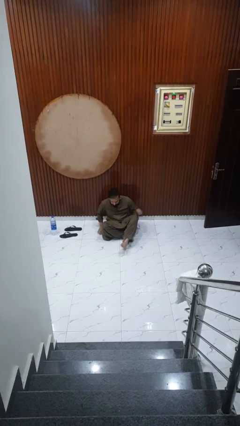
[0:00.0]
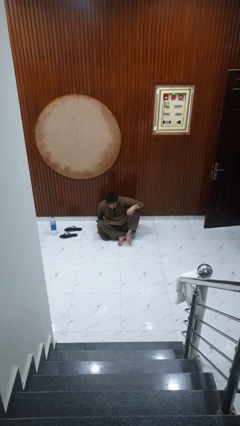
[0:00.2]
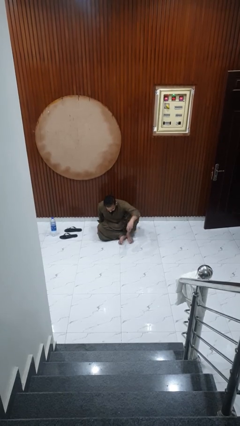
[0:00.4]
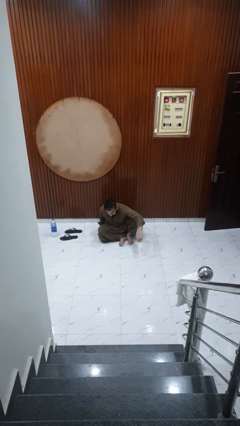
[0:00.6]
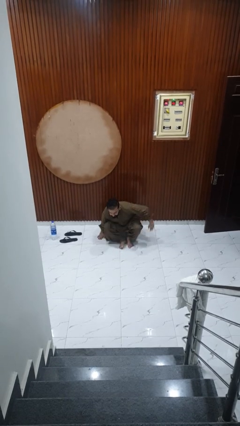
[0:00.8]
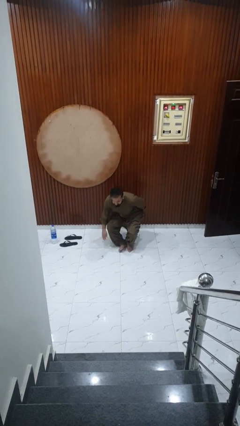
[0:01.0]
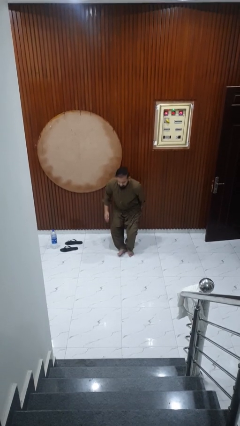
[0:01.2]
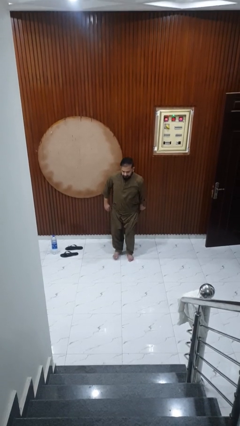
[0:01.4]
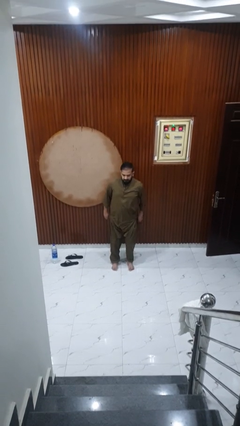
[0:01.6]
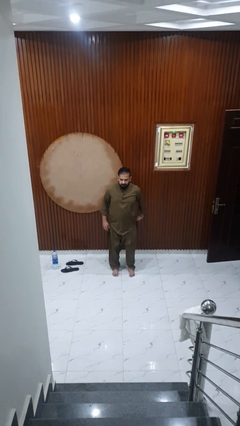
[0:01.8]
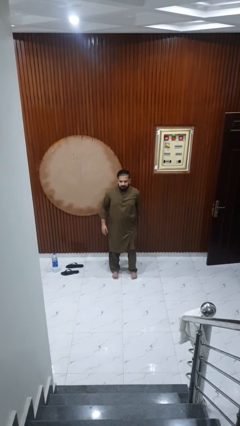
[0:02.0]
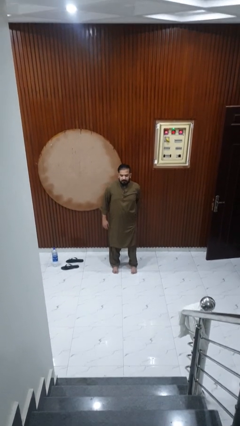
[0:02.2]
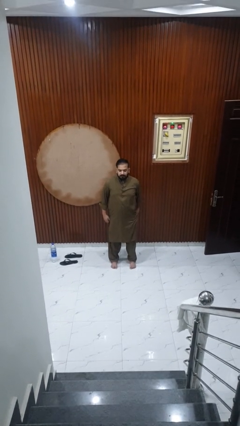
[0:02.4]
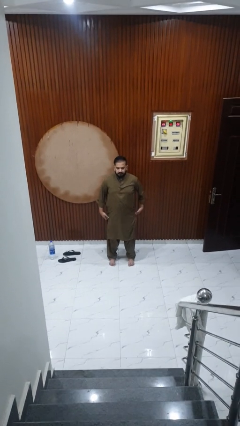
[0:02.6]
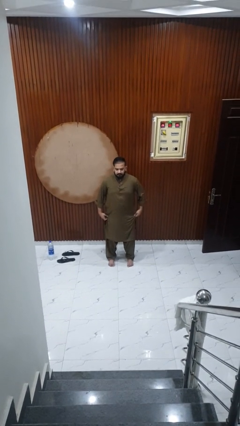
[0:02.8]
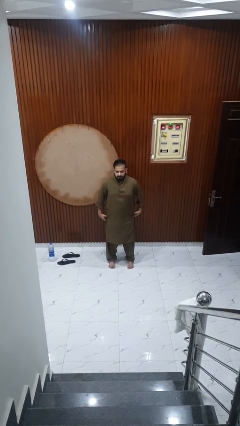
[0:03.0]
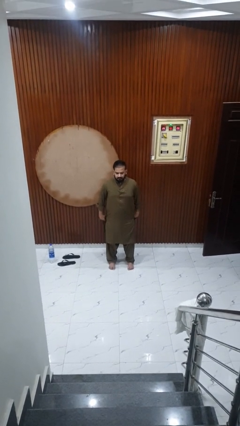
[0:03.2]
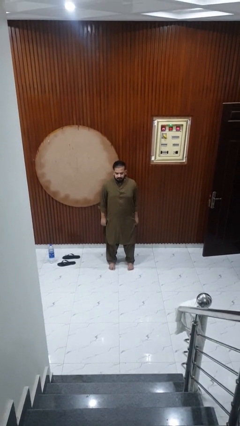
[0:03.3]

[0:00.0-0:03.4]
person stands up from floor

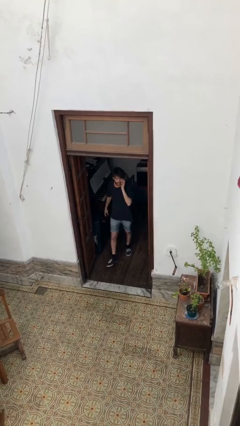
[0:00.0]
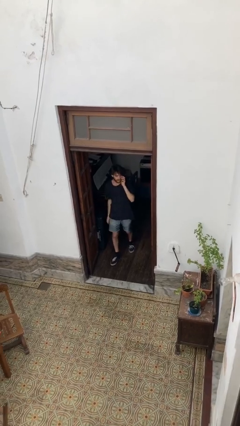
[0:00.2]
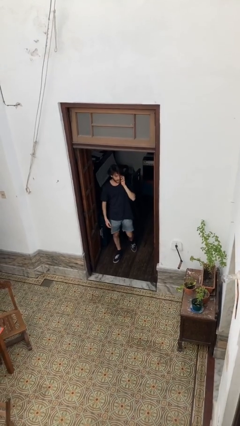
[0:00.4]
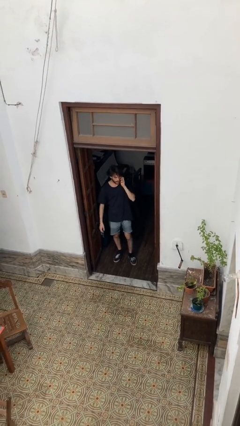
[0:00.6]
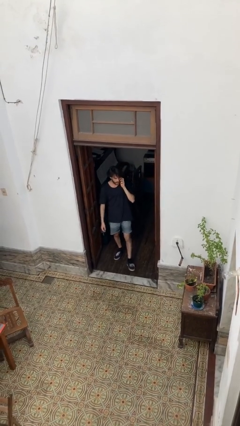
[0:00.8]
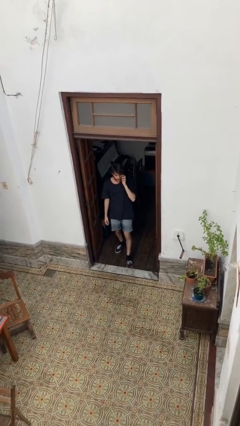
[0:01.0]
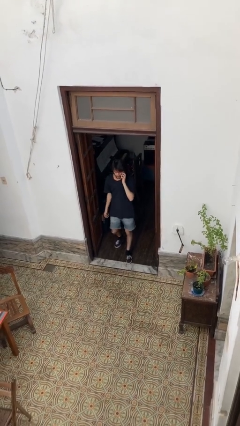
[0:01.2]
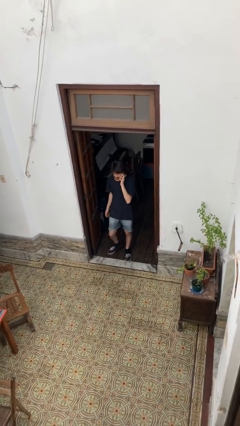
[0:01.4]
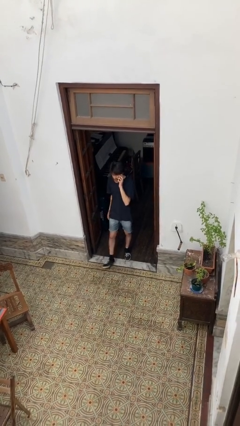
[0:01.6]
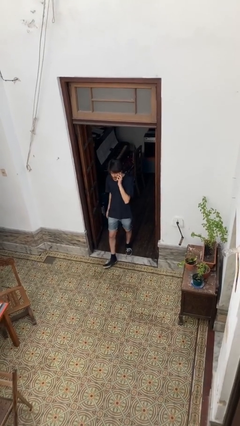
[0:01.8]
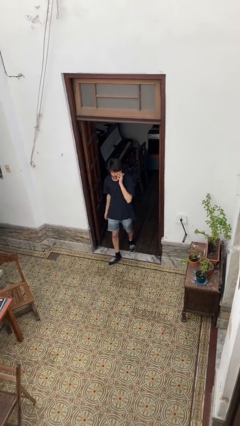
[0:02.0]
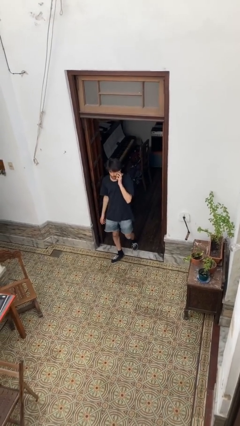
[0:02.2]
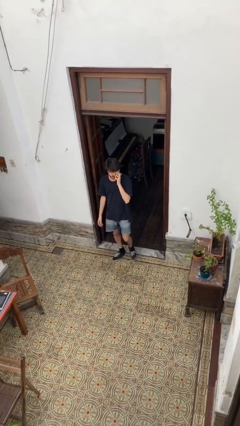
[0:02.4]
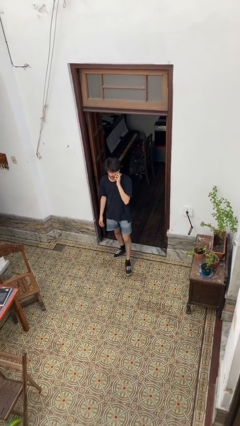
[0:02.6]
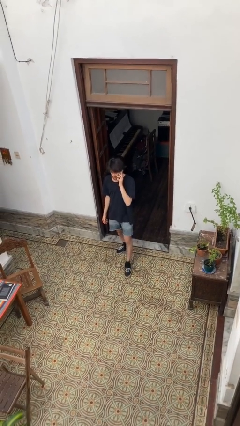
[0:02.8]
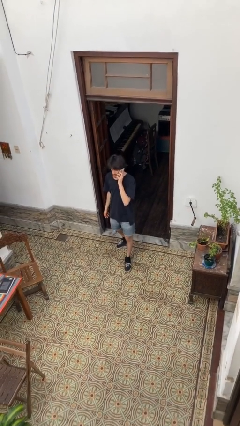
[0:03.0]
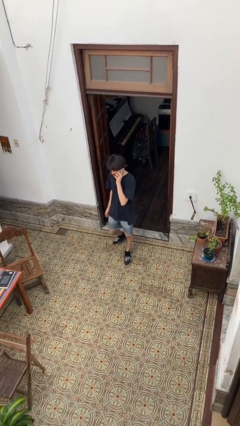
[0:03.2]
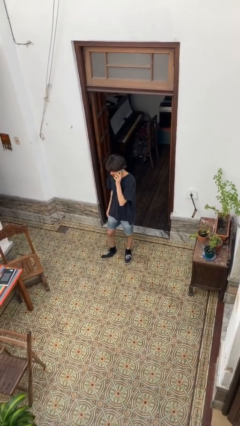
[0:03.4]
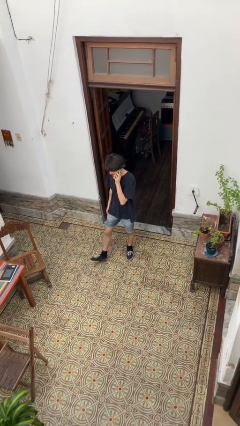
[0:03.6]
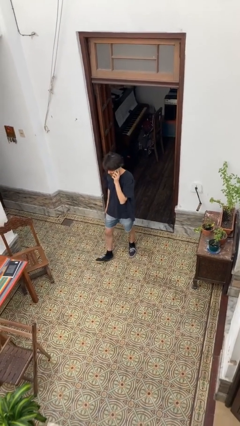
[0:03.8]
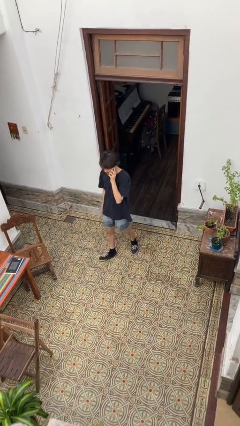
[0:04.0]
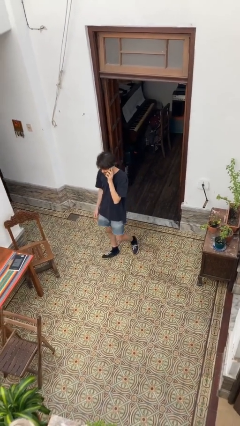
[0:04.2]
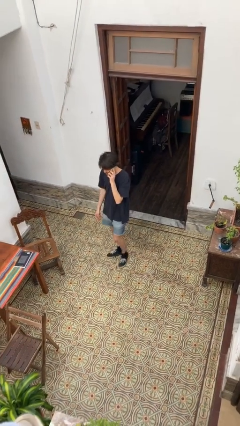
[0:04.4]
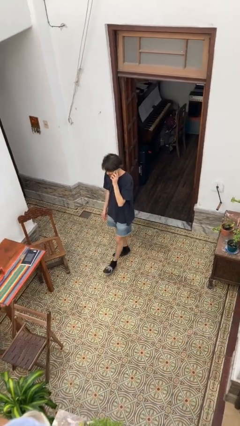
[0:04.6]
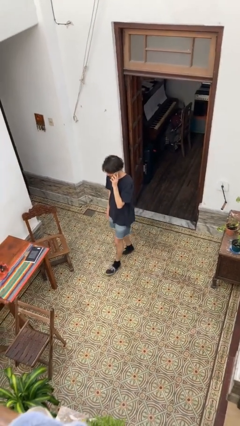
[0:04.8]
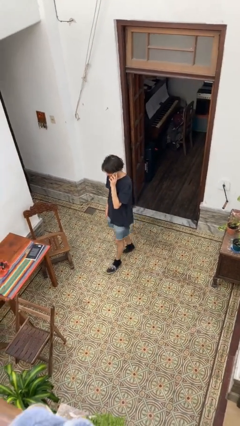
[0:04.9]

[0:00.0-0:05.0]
person enters scene through structure

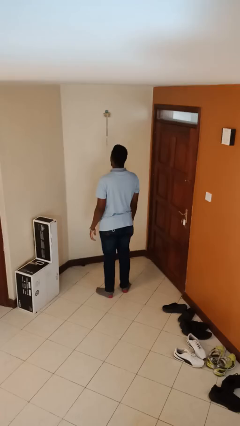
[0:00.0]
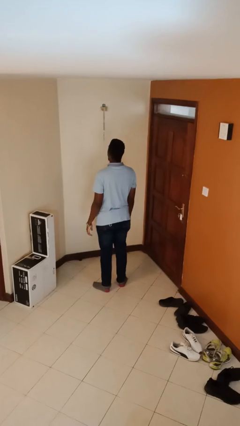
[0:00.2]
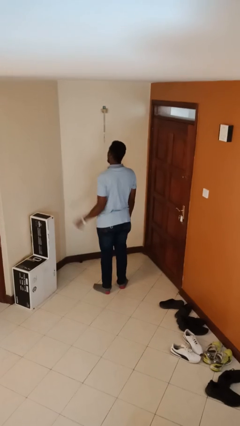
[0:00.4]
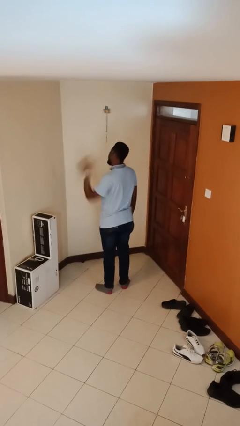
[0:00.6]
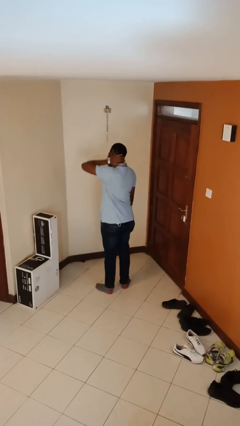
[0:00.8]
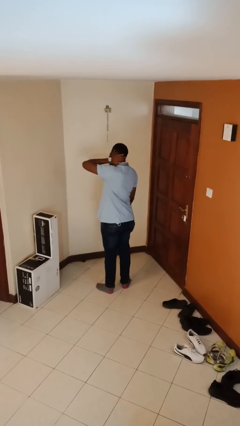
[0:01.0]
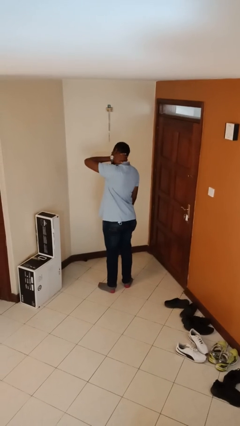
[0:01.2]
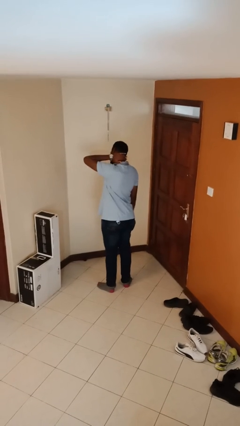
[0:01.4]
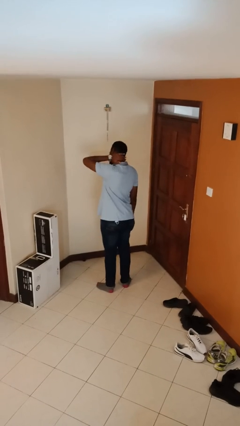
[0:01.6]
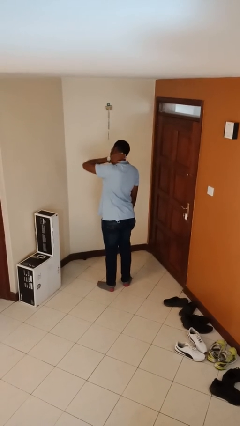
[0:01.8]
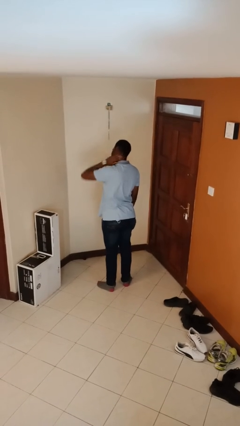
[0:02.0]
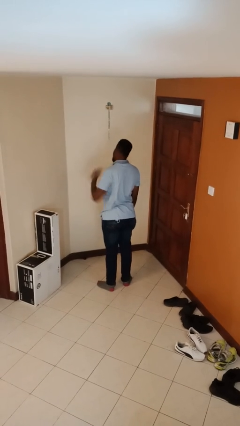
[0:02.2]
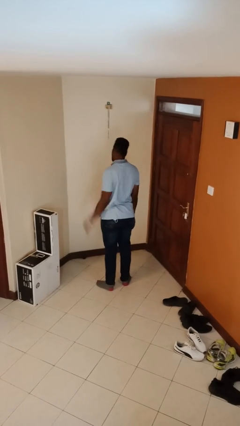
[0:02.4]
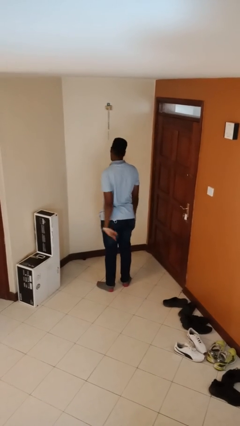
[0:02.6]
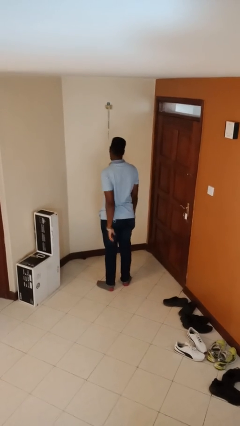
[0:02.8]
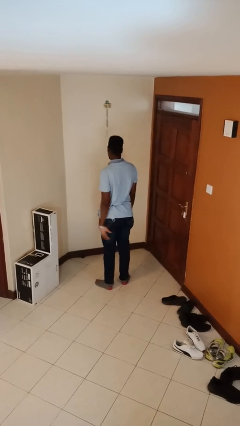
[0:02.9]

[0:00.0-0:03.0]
person swats bug

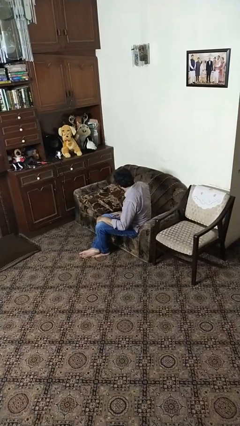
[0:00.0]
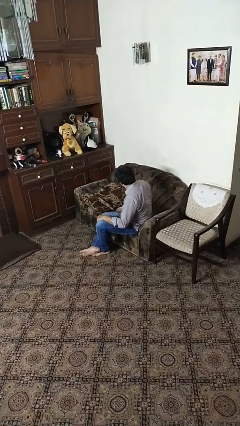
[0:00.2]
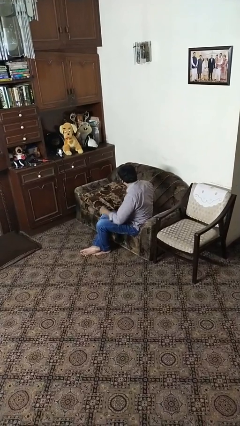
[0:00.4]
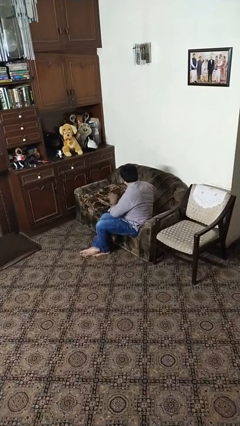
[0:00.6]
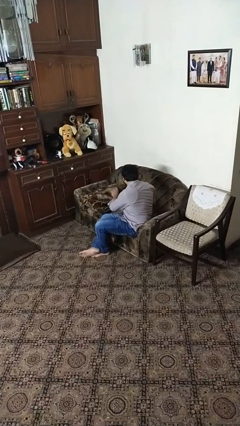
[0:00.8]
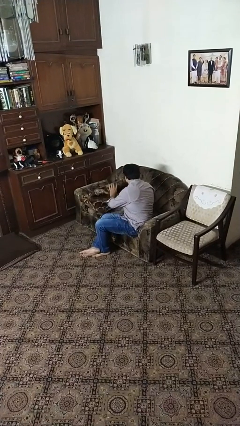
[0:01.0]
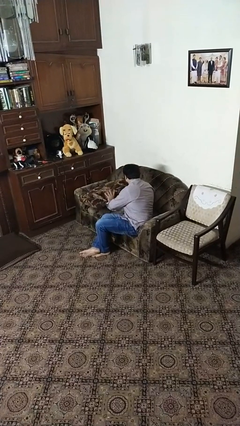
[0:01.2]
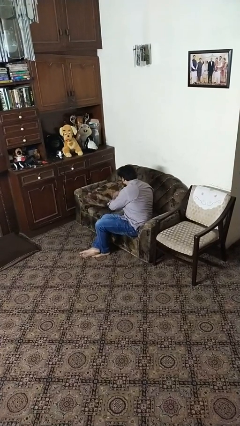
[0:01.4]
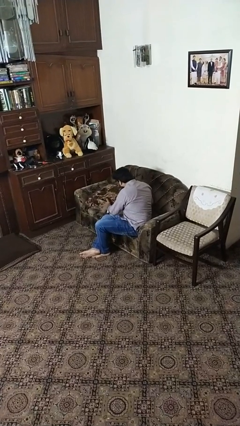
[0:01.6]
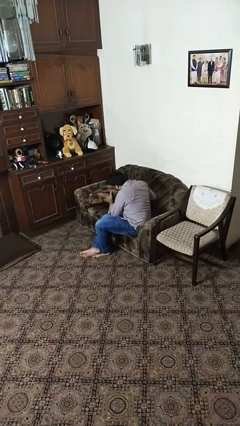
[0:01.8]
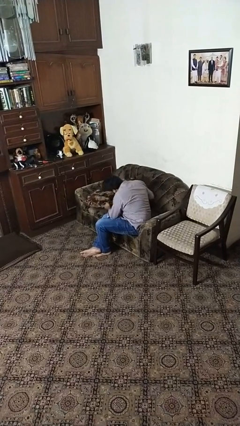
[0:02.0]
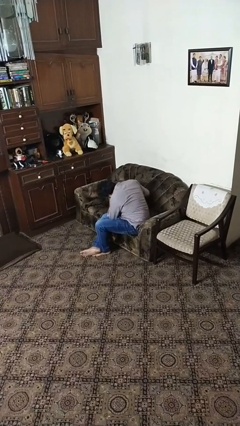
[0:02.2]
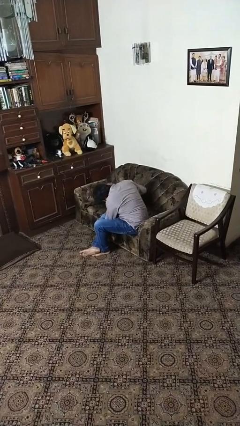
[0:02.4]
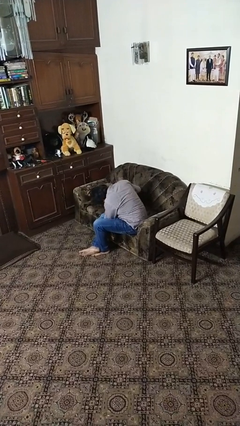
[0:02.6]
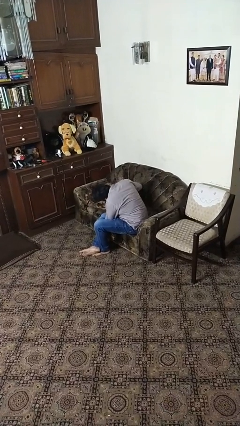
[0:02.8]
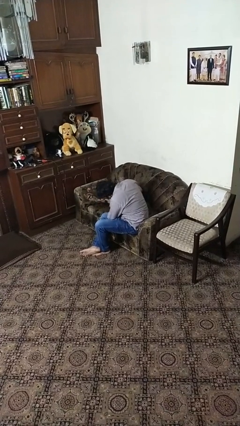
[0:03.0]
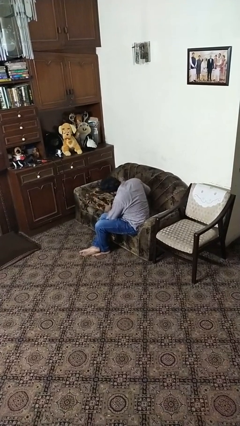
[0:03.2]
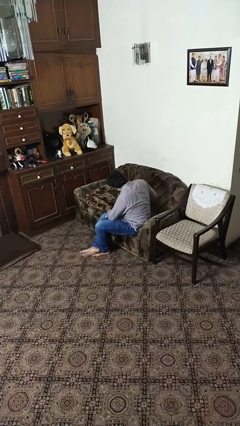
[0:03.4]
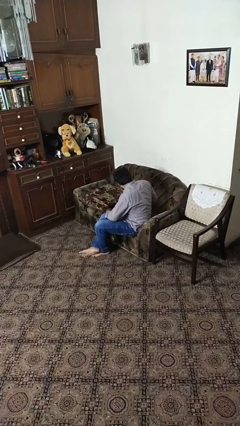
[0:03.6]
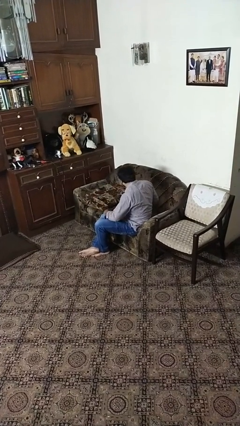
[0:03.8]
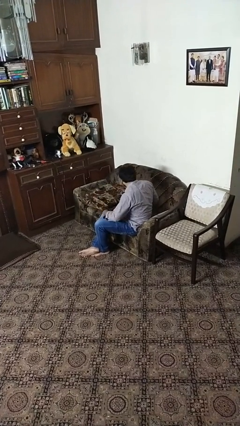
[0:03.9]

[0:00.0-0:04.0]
person searches in couch

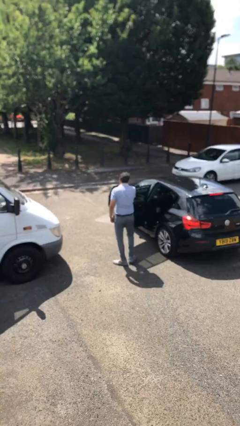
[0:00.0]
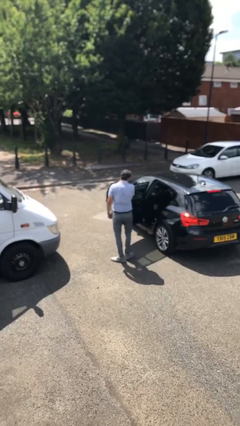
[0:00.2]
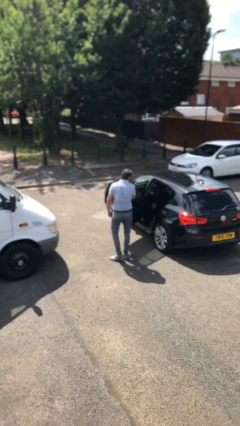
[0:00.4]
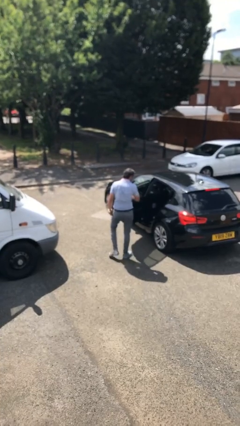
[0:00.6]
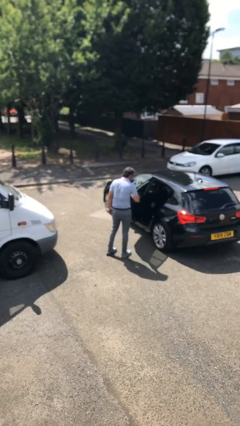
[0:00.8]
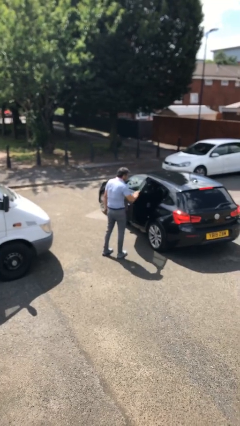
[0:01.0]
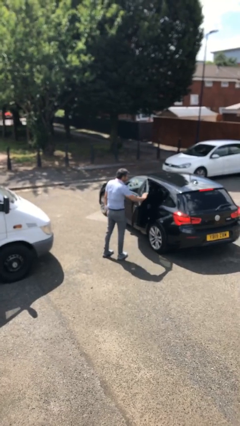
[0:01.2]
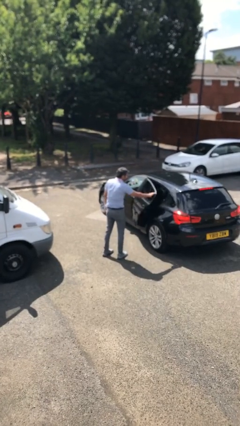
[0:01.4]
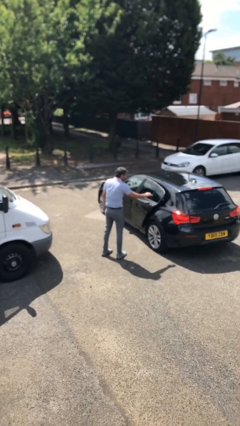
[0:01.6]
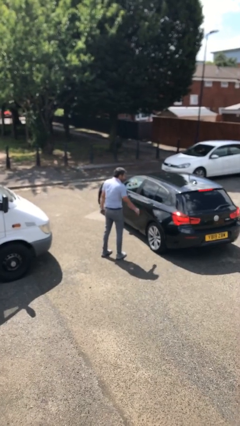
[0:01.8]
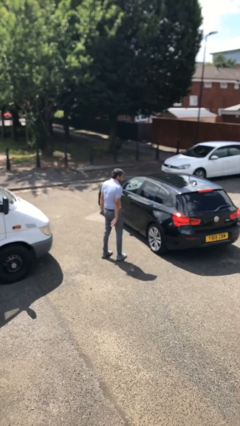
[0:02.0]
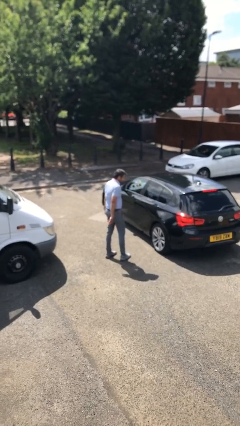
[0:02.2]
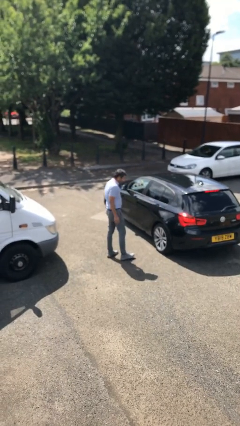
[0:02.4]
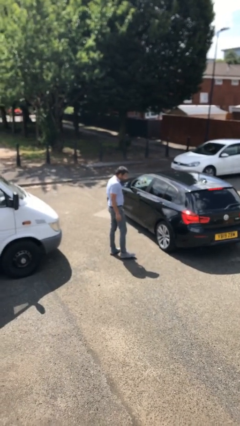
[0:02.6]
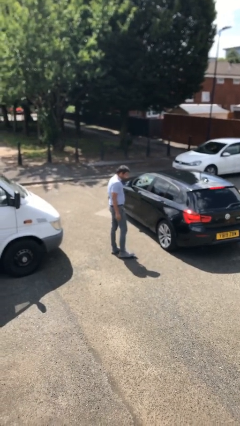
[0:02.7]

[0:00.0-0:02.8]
person closes car door
